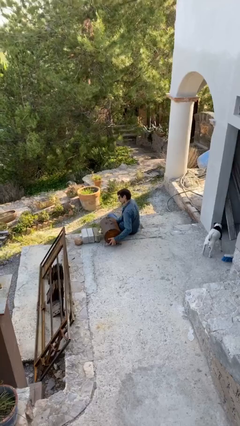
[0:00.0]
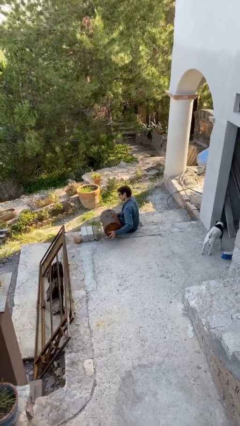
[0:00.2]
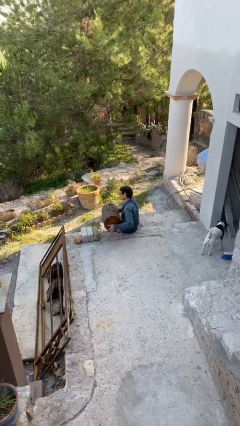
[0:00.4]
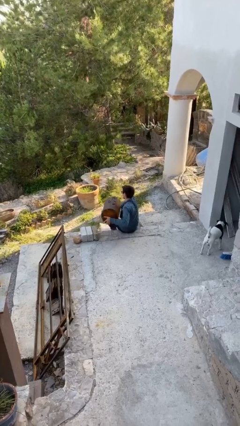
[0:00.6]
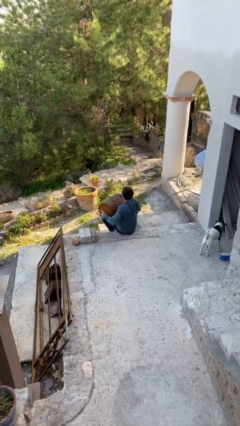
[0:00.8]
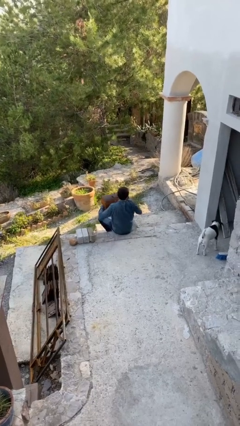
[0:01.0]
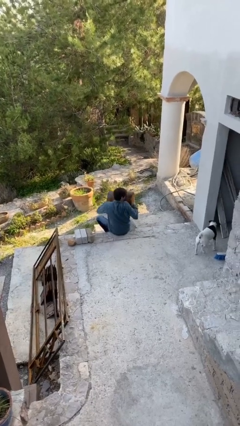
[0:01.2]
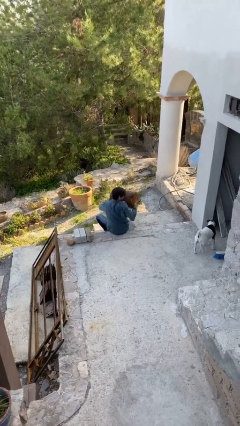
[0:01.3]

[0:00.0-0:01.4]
person picks up object from floor

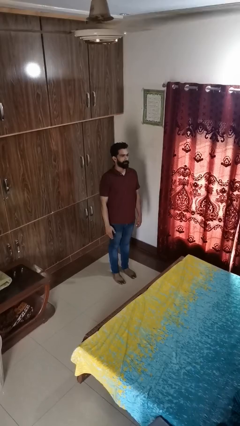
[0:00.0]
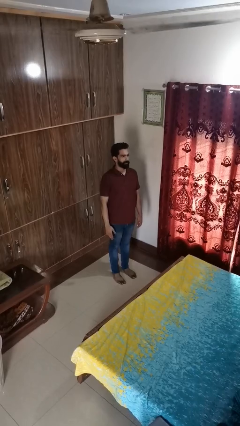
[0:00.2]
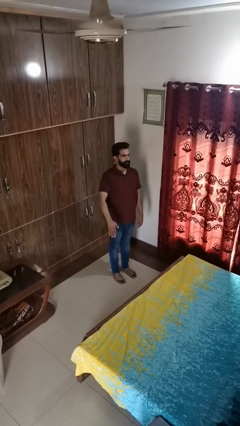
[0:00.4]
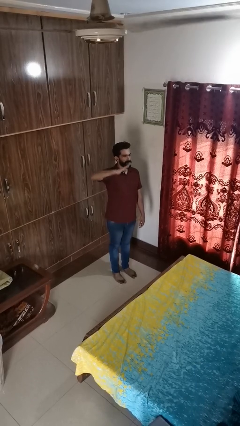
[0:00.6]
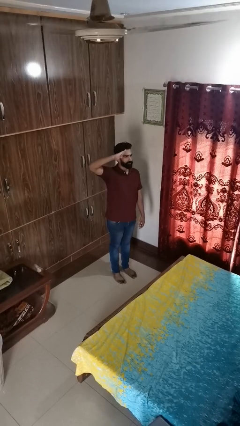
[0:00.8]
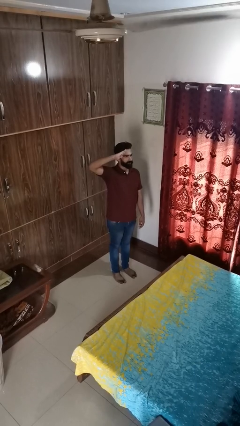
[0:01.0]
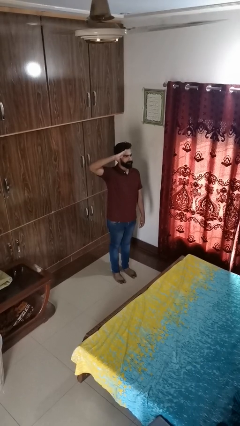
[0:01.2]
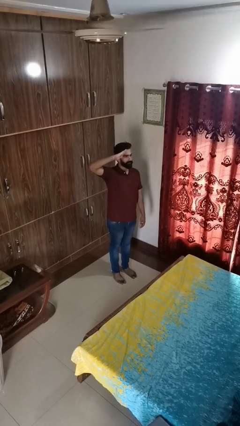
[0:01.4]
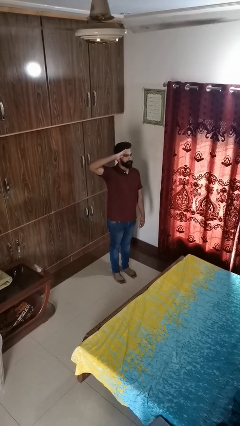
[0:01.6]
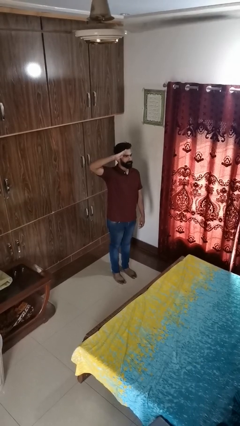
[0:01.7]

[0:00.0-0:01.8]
person salutes

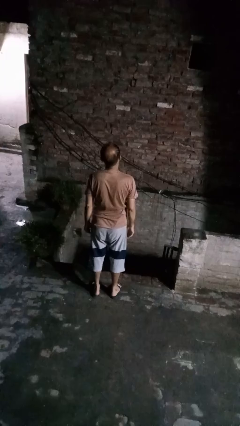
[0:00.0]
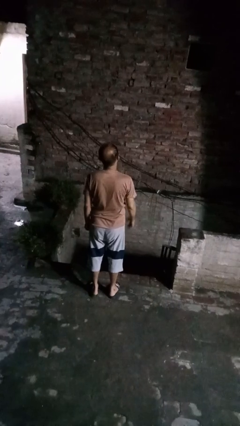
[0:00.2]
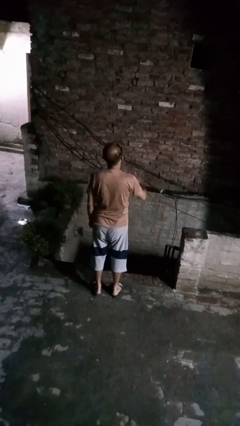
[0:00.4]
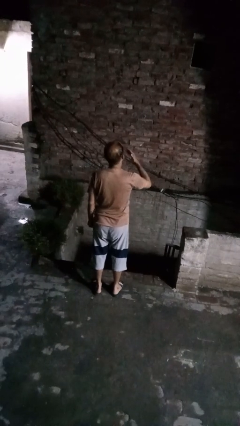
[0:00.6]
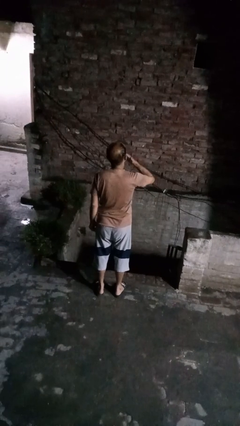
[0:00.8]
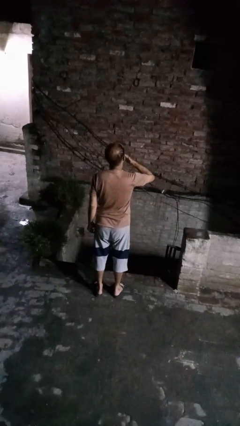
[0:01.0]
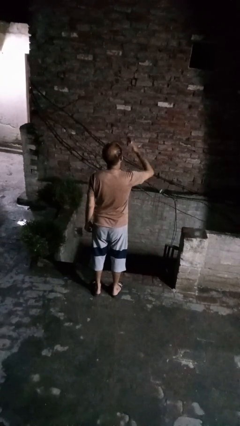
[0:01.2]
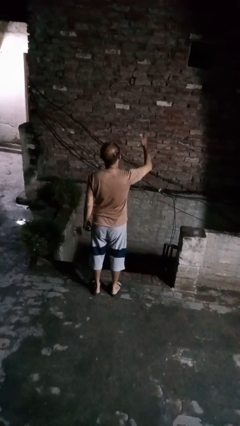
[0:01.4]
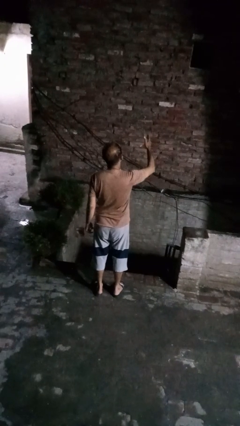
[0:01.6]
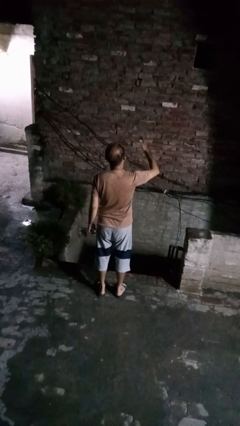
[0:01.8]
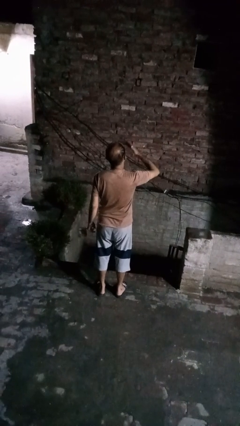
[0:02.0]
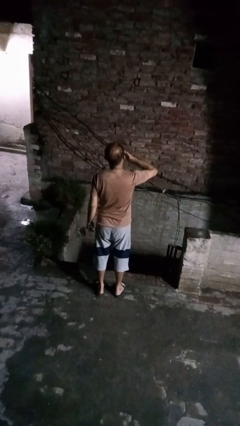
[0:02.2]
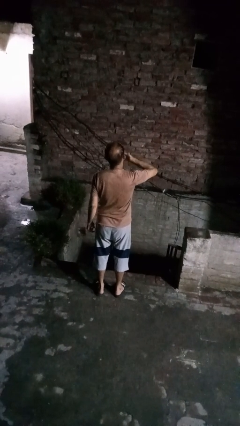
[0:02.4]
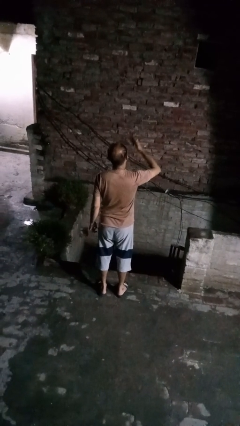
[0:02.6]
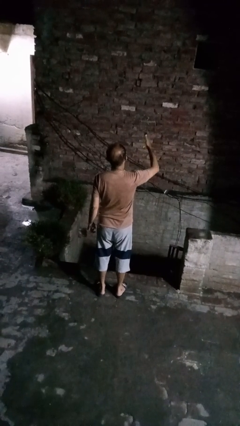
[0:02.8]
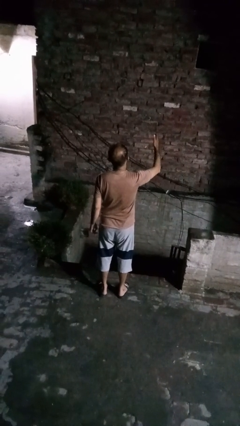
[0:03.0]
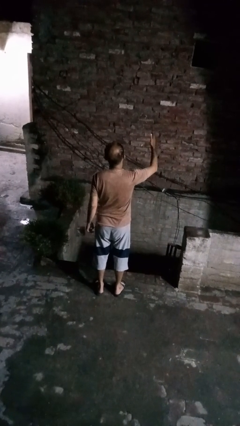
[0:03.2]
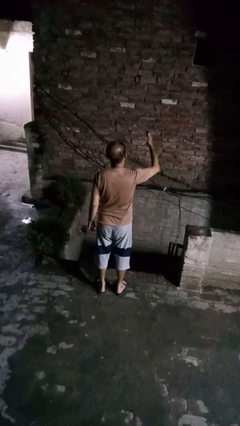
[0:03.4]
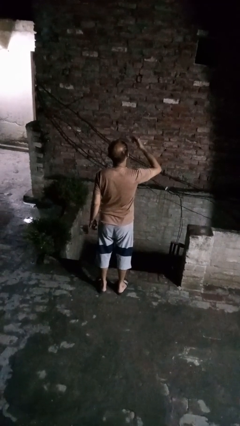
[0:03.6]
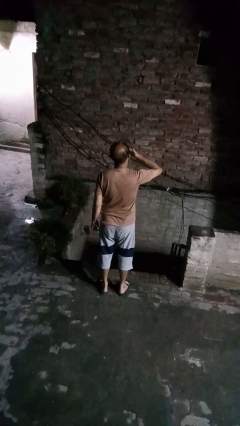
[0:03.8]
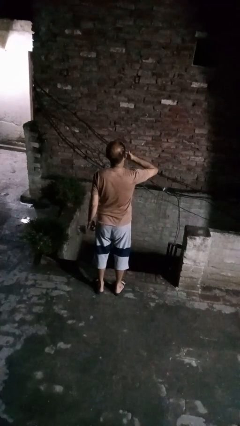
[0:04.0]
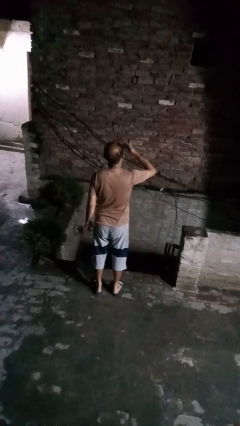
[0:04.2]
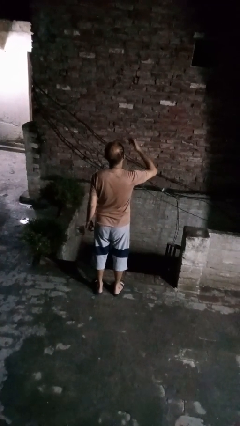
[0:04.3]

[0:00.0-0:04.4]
person gestures blow kiss

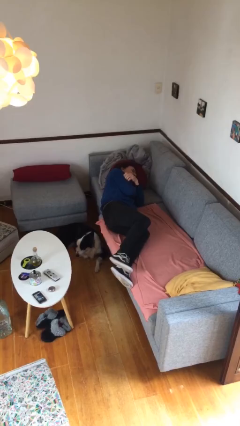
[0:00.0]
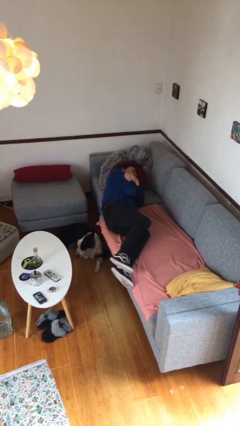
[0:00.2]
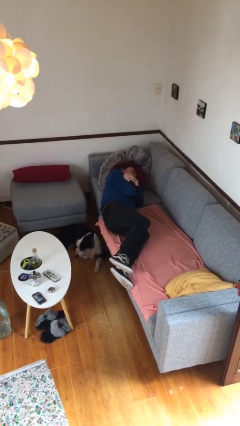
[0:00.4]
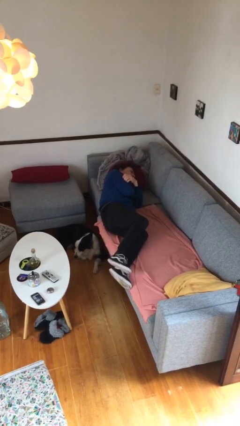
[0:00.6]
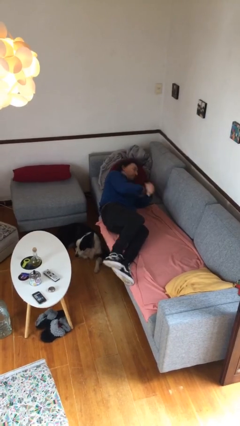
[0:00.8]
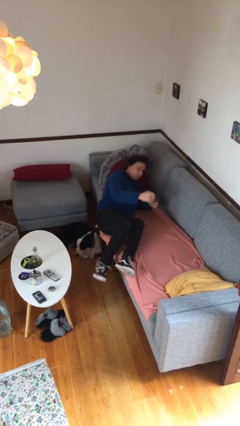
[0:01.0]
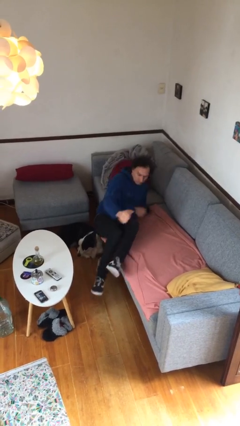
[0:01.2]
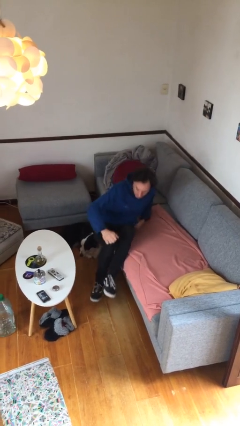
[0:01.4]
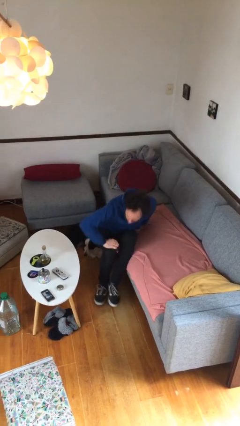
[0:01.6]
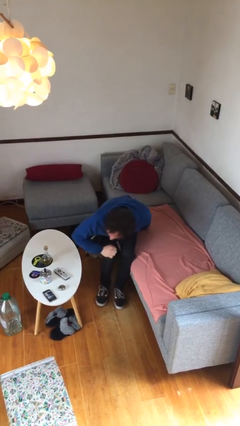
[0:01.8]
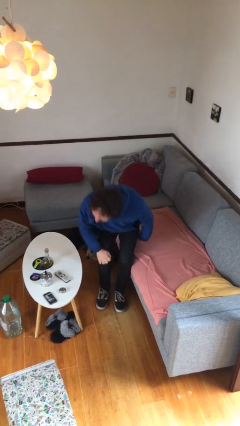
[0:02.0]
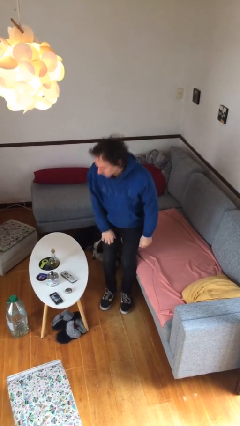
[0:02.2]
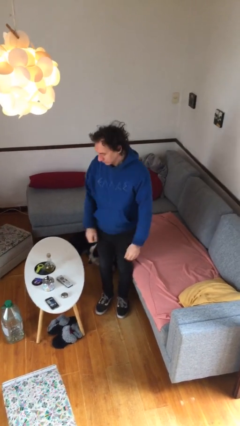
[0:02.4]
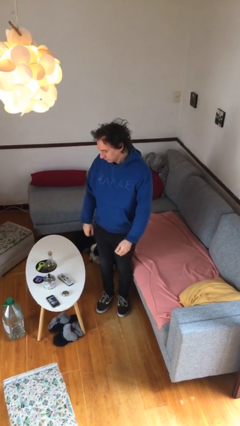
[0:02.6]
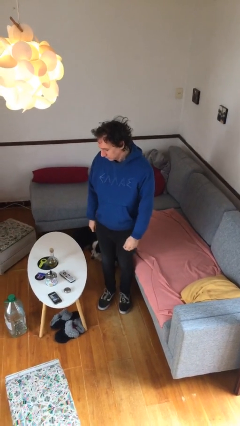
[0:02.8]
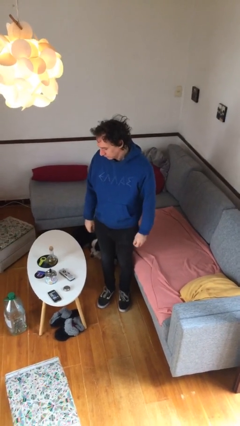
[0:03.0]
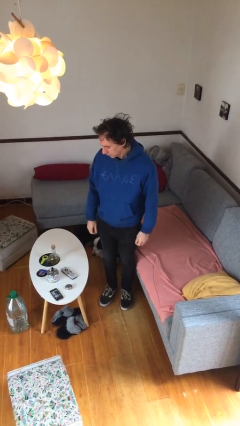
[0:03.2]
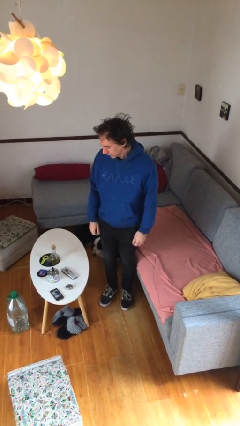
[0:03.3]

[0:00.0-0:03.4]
person stands up

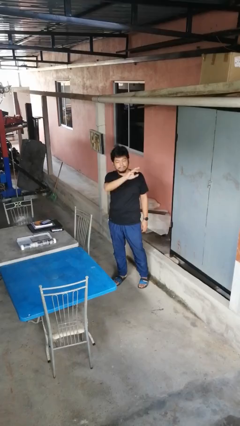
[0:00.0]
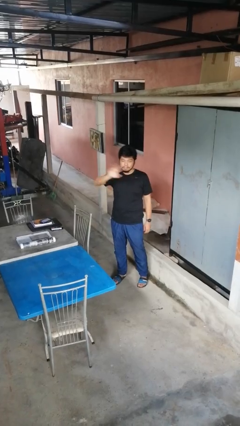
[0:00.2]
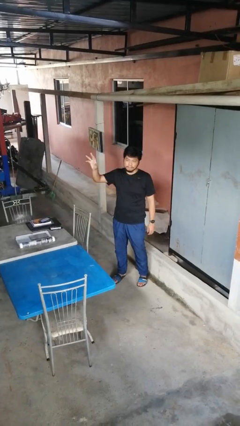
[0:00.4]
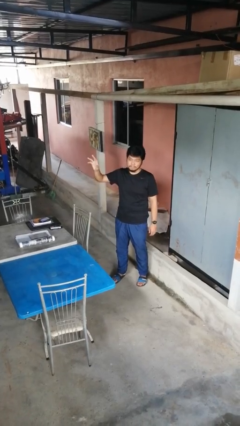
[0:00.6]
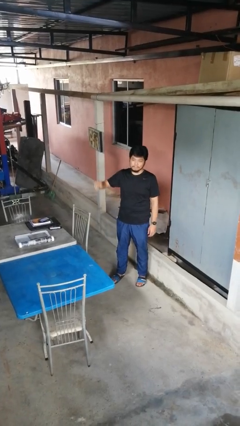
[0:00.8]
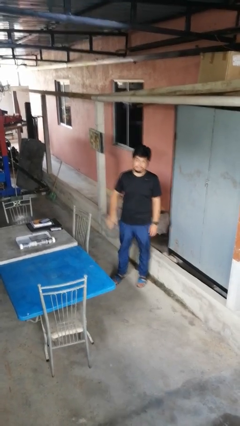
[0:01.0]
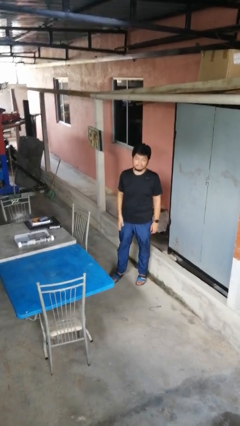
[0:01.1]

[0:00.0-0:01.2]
person gestures swipe right

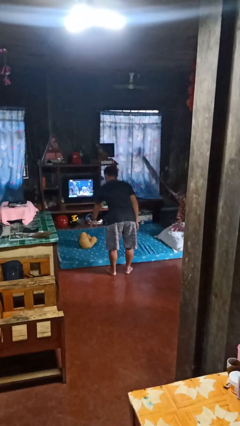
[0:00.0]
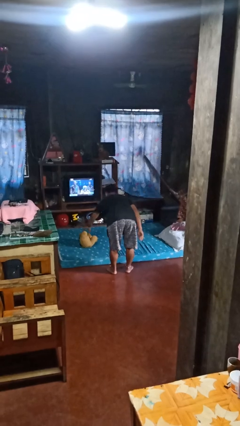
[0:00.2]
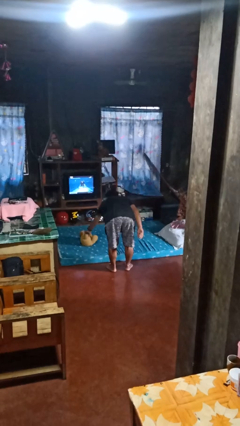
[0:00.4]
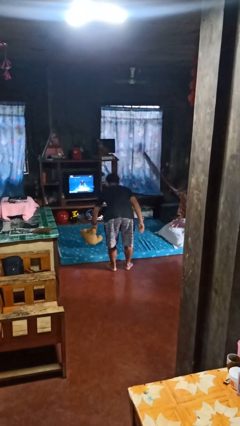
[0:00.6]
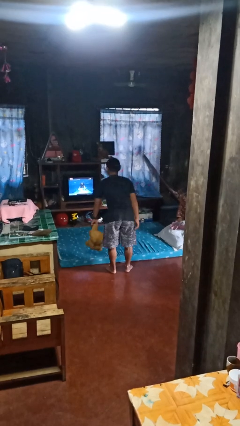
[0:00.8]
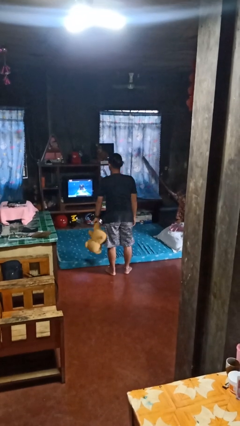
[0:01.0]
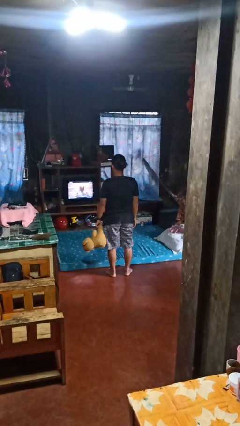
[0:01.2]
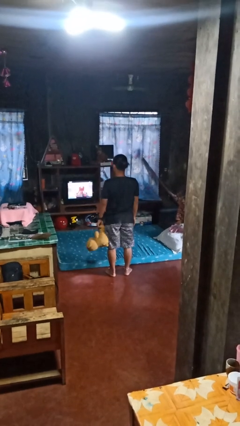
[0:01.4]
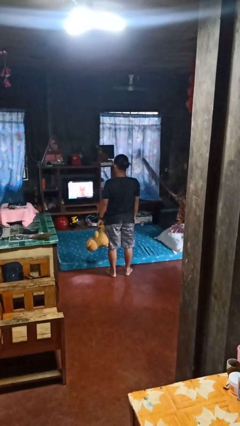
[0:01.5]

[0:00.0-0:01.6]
person picks up object from bed

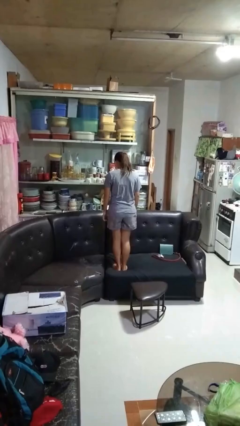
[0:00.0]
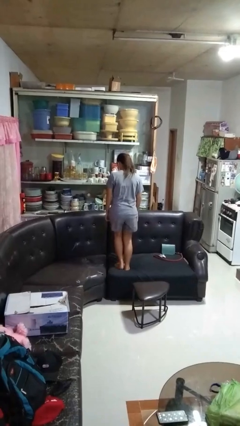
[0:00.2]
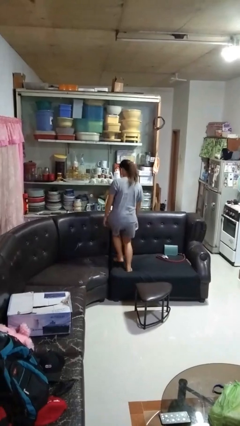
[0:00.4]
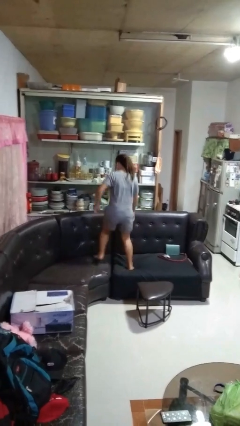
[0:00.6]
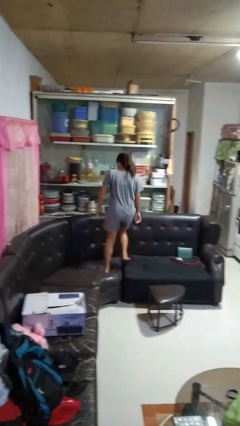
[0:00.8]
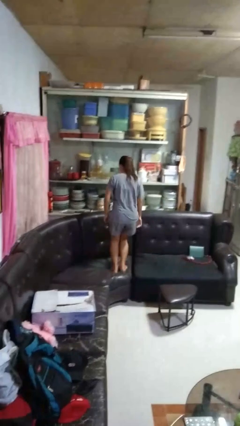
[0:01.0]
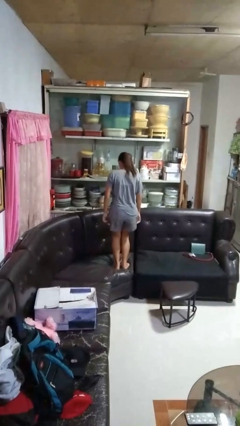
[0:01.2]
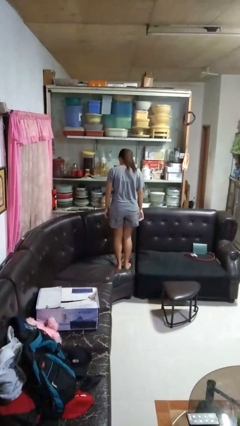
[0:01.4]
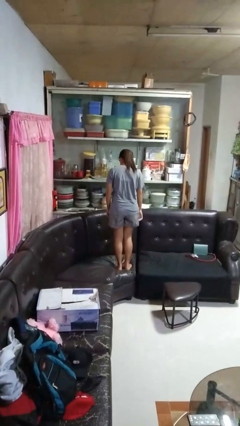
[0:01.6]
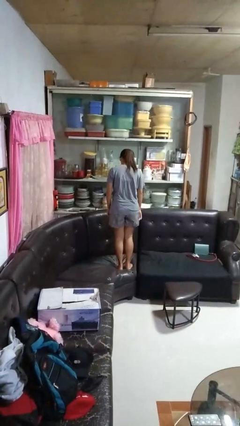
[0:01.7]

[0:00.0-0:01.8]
person jumps on couch

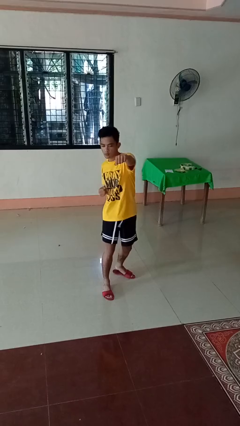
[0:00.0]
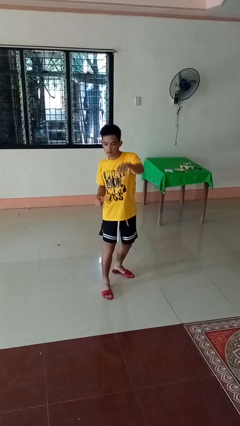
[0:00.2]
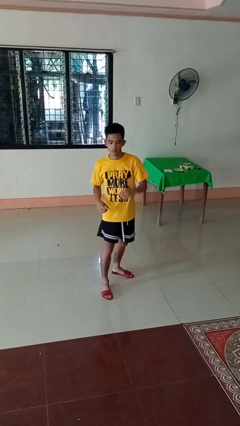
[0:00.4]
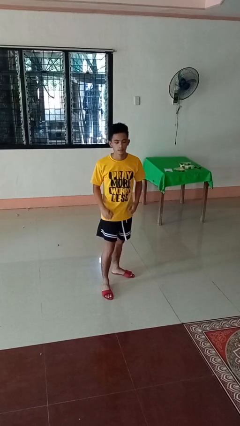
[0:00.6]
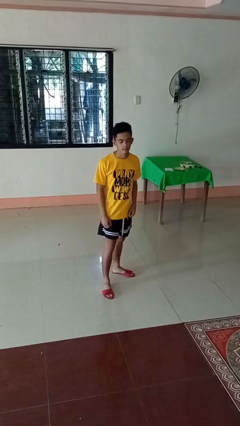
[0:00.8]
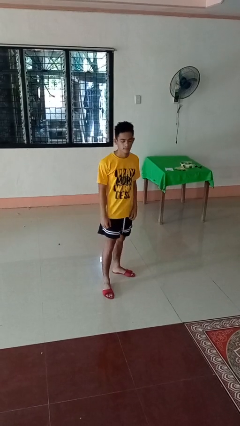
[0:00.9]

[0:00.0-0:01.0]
person punches
